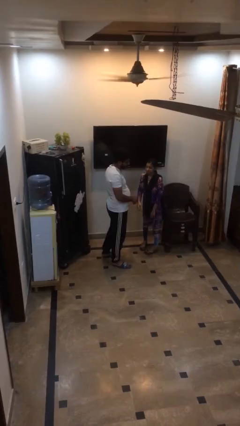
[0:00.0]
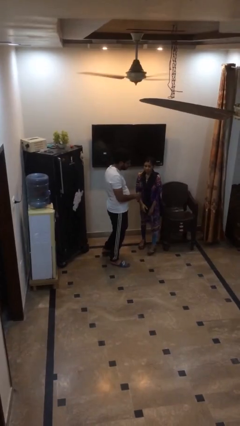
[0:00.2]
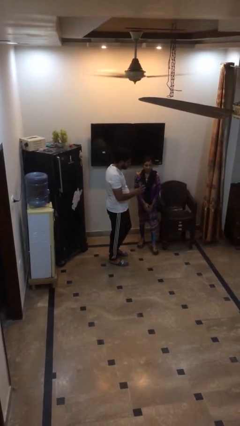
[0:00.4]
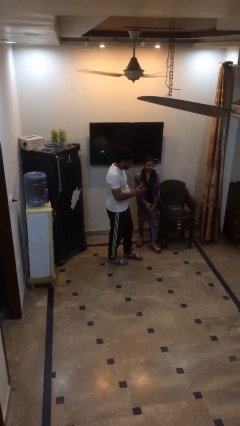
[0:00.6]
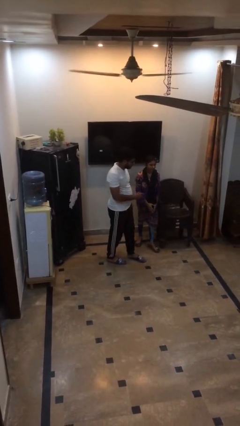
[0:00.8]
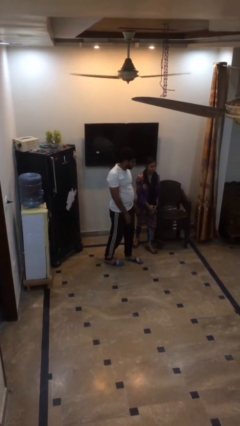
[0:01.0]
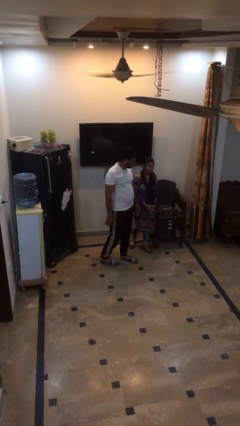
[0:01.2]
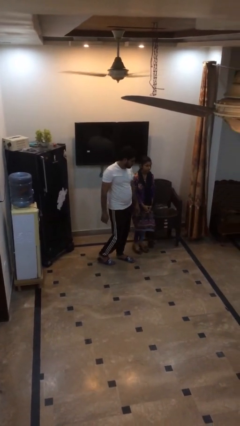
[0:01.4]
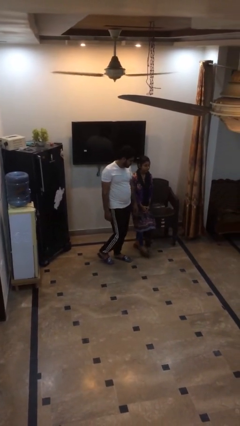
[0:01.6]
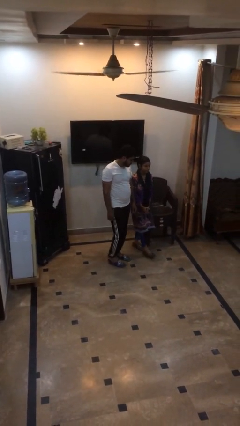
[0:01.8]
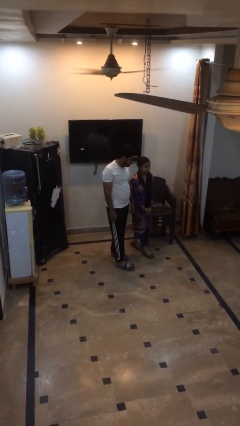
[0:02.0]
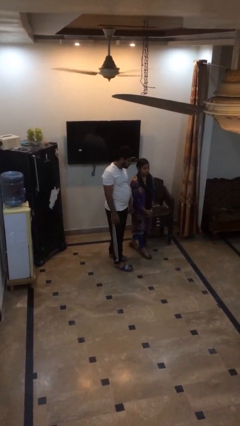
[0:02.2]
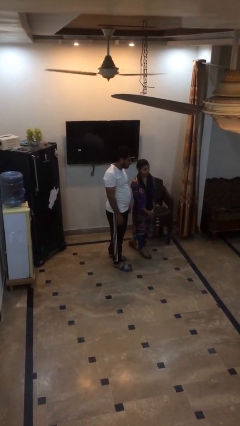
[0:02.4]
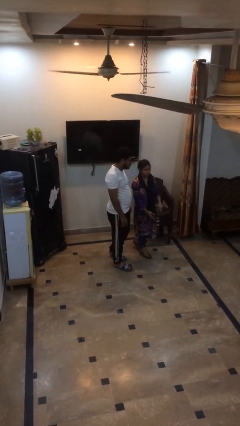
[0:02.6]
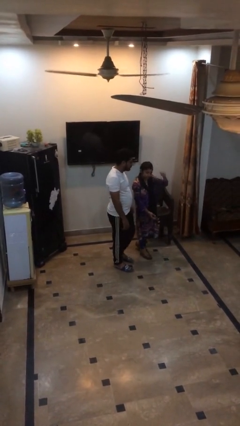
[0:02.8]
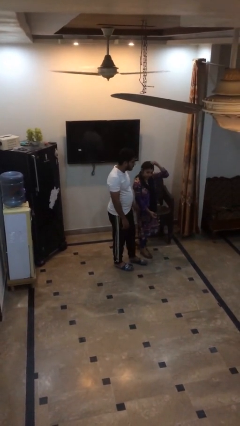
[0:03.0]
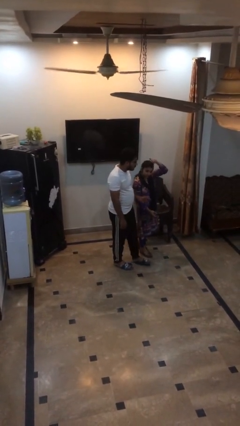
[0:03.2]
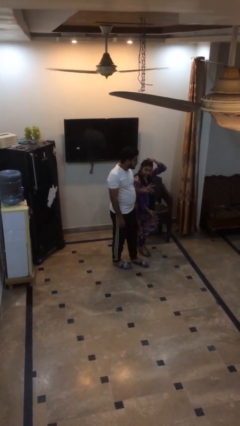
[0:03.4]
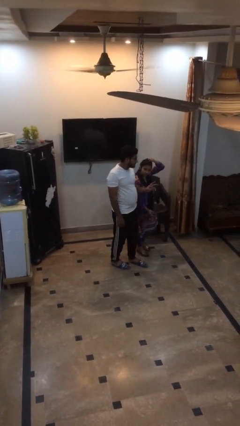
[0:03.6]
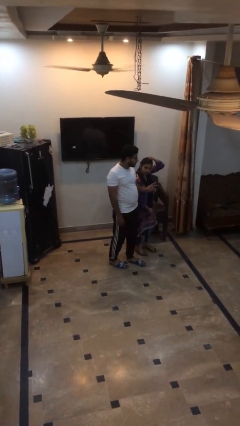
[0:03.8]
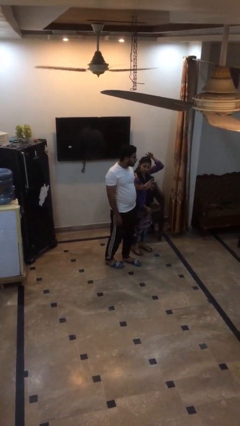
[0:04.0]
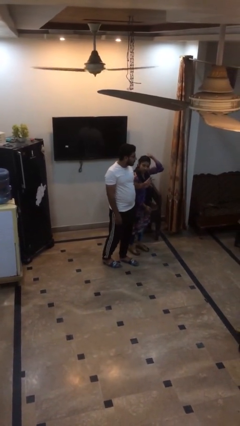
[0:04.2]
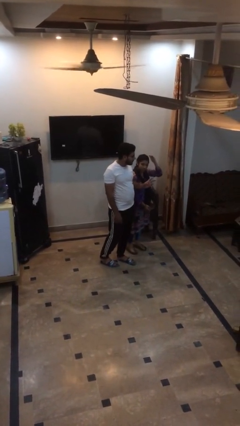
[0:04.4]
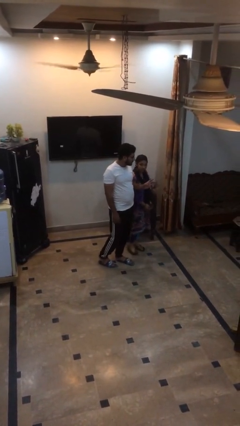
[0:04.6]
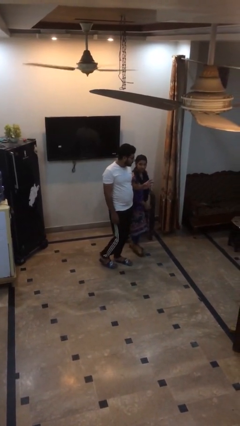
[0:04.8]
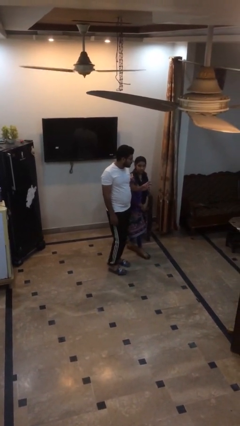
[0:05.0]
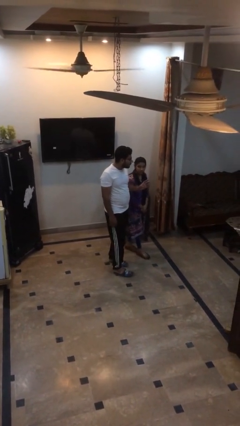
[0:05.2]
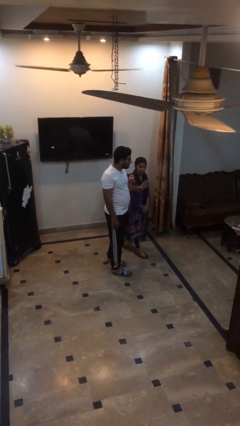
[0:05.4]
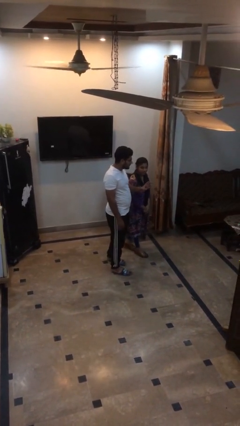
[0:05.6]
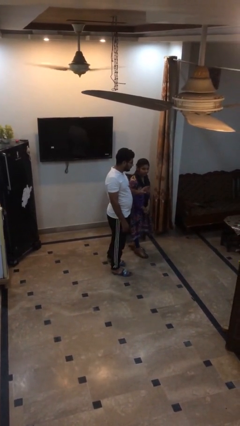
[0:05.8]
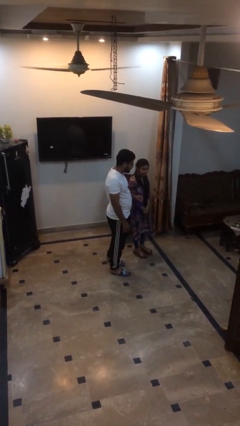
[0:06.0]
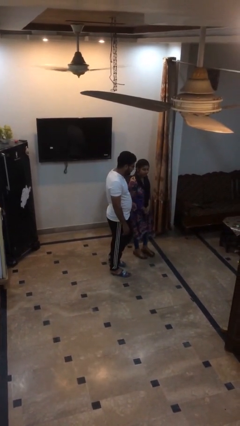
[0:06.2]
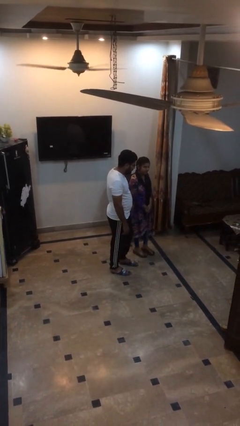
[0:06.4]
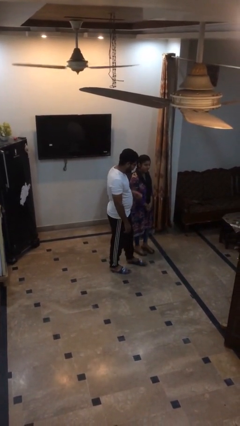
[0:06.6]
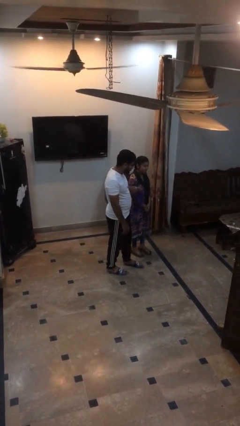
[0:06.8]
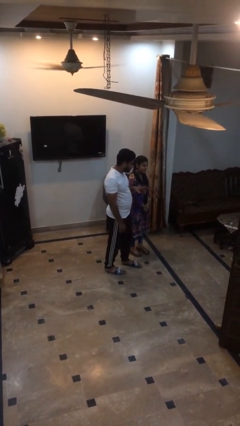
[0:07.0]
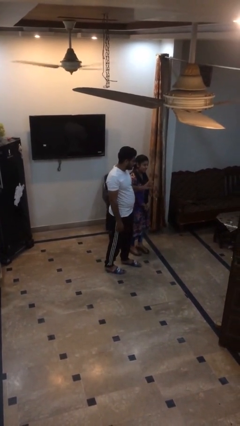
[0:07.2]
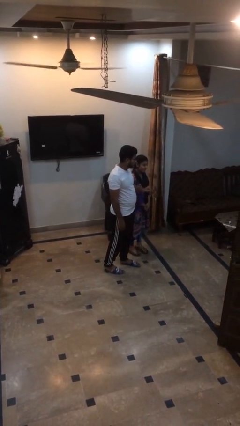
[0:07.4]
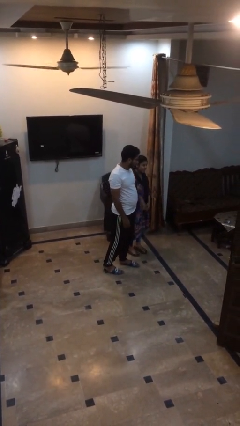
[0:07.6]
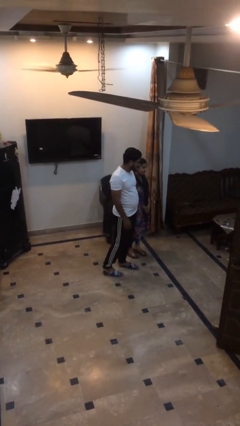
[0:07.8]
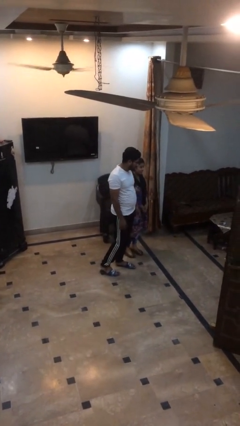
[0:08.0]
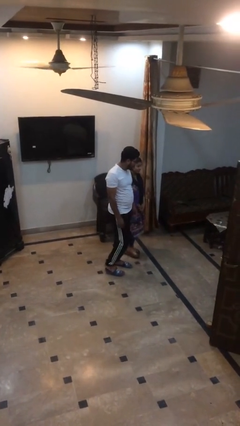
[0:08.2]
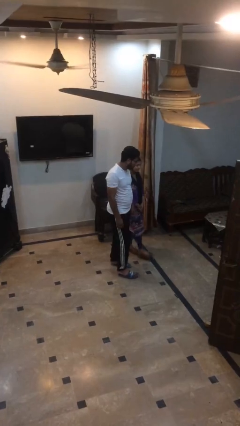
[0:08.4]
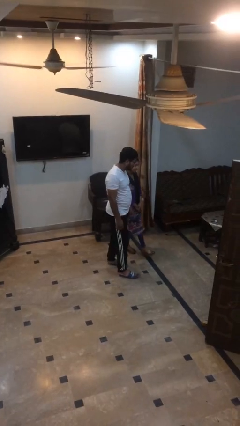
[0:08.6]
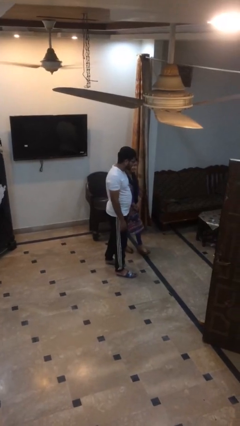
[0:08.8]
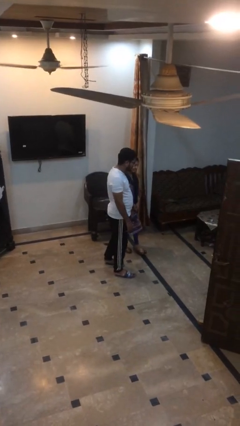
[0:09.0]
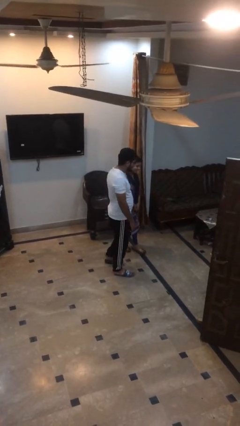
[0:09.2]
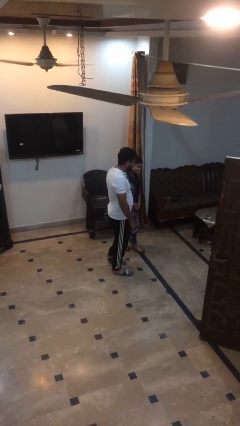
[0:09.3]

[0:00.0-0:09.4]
person talks to person

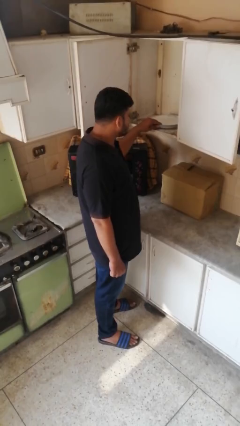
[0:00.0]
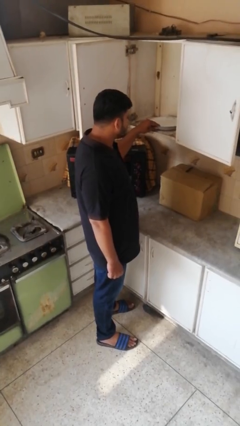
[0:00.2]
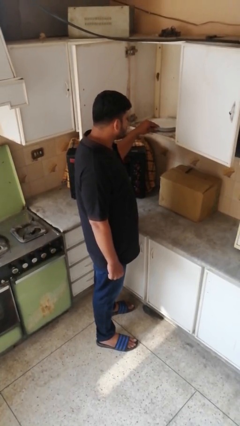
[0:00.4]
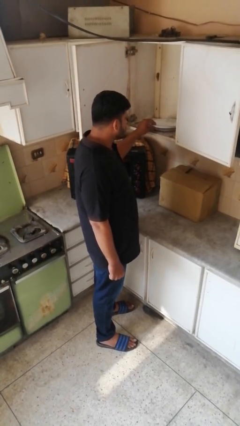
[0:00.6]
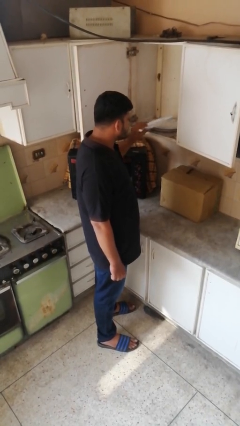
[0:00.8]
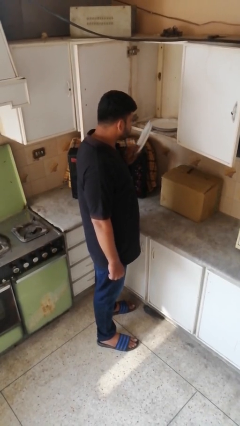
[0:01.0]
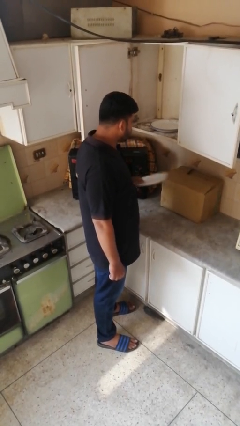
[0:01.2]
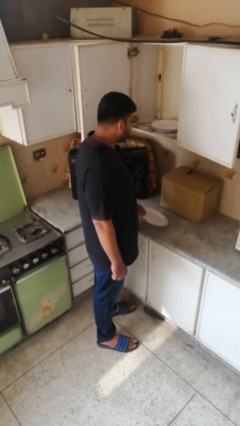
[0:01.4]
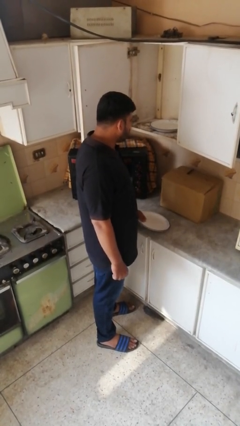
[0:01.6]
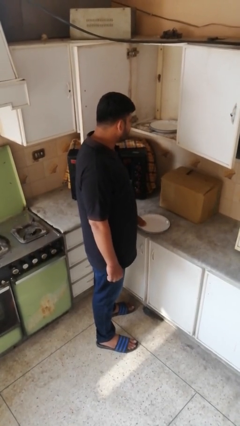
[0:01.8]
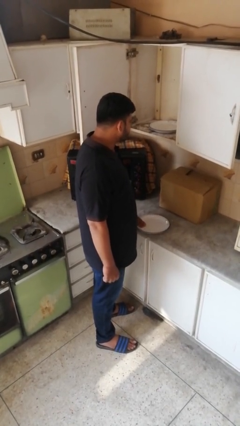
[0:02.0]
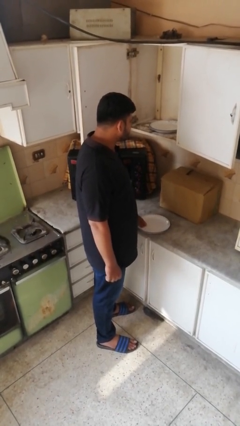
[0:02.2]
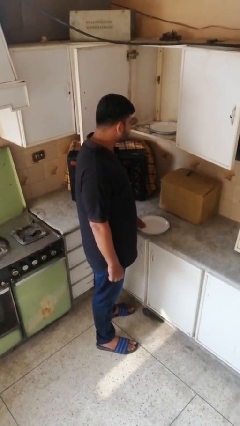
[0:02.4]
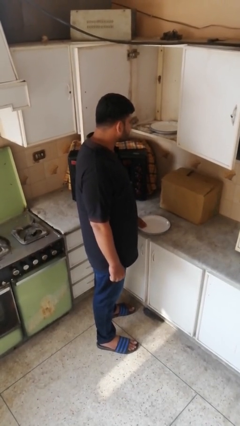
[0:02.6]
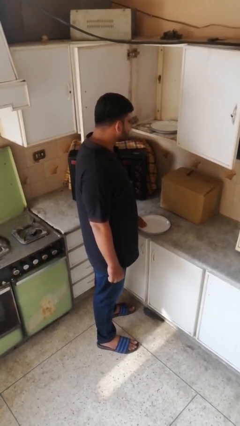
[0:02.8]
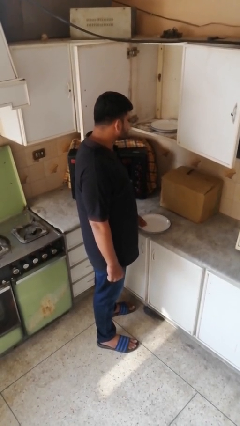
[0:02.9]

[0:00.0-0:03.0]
person takes object from cabinet

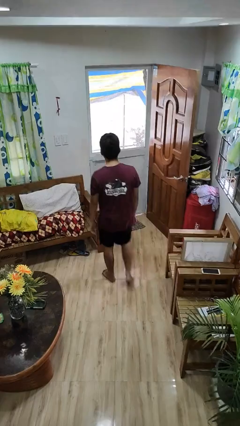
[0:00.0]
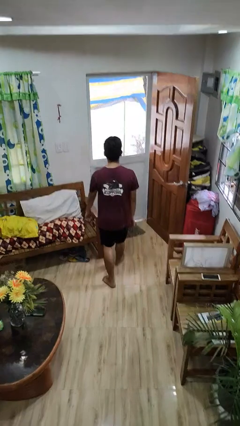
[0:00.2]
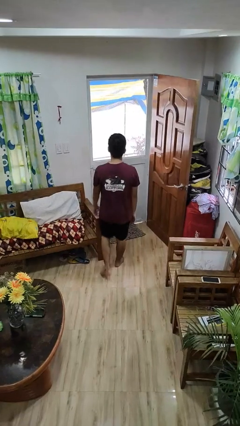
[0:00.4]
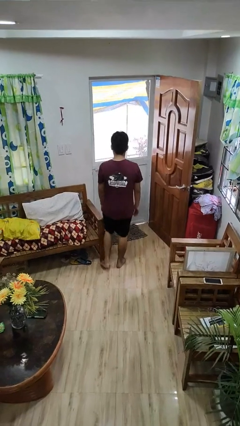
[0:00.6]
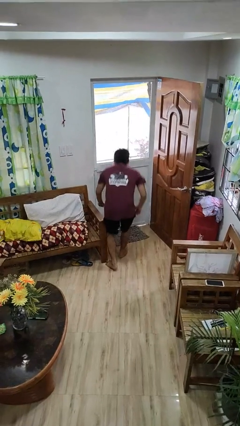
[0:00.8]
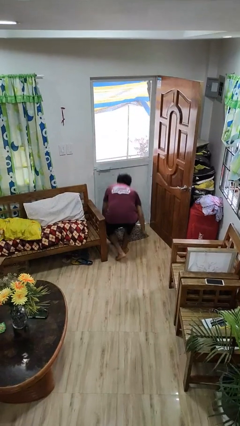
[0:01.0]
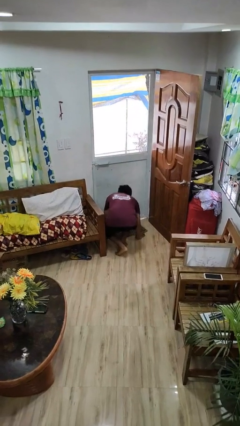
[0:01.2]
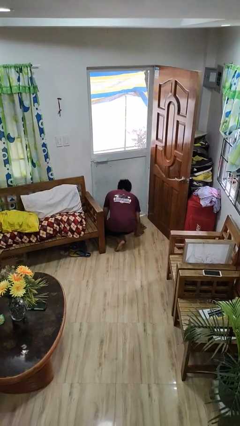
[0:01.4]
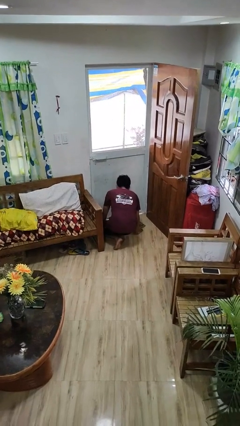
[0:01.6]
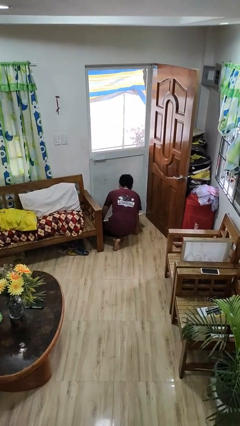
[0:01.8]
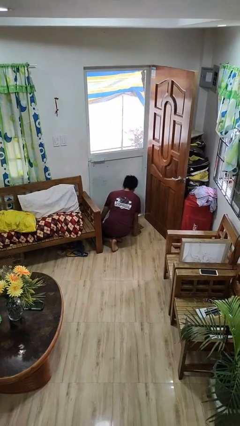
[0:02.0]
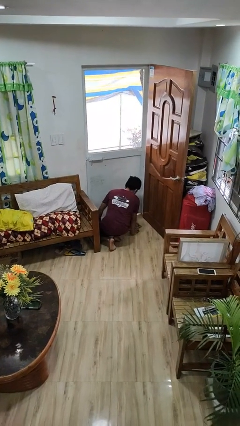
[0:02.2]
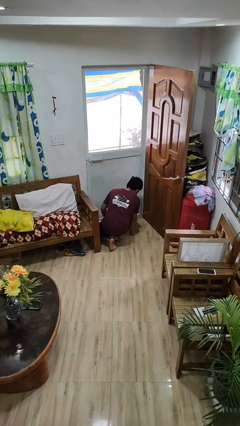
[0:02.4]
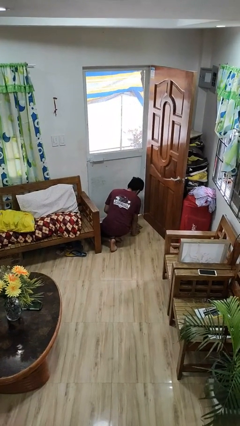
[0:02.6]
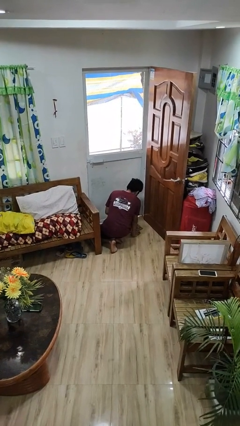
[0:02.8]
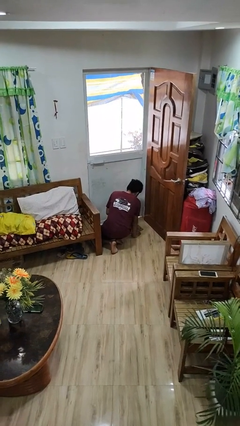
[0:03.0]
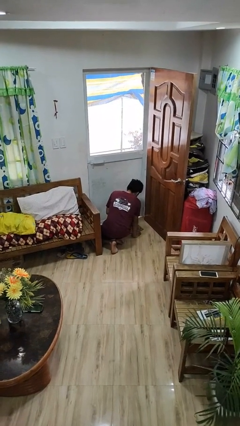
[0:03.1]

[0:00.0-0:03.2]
person trips on object on floor

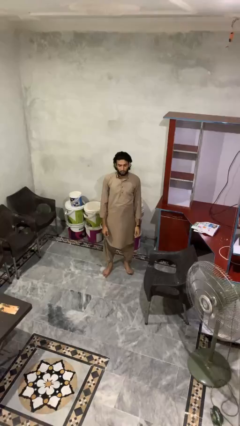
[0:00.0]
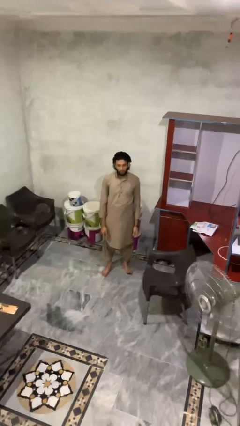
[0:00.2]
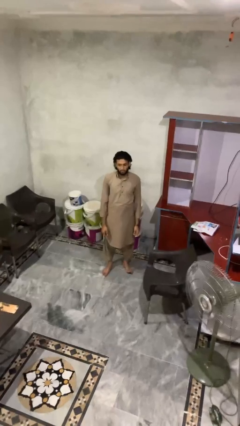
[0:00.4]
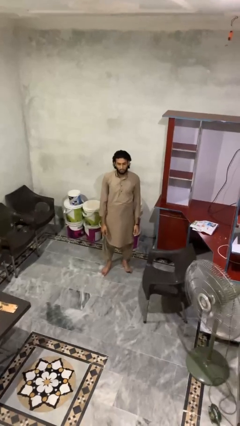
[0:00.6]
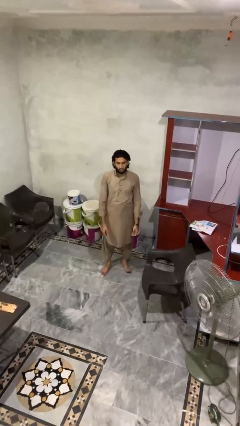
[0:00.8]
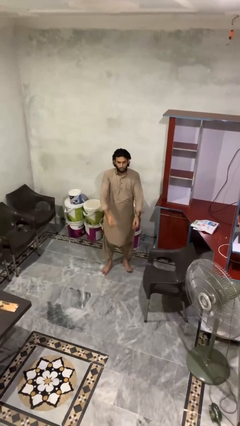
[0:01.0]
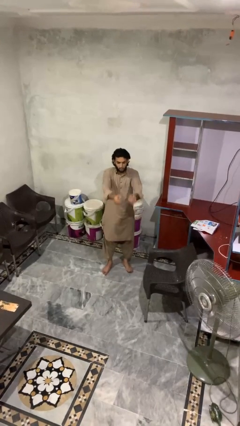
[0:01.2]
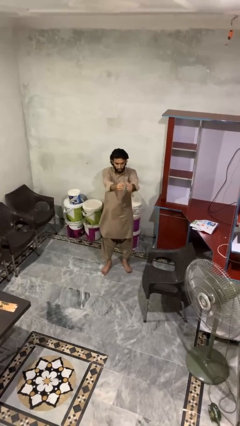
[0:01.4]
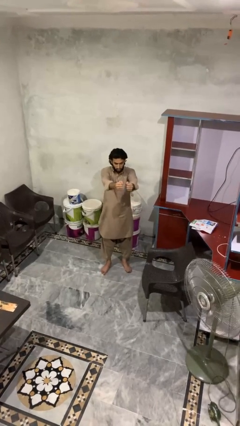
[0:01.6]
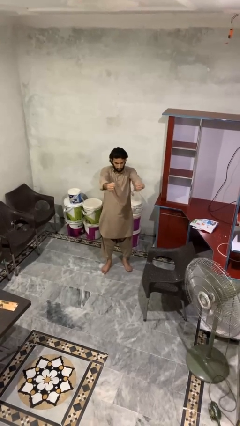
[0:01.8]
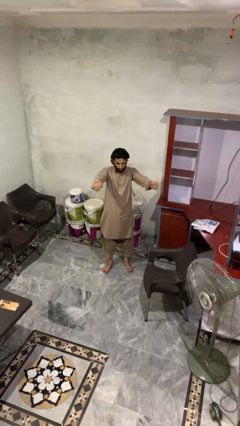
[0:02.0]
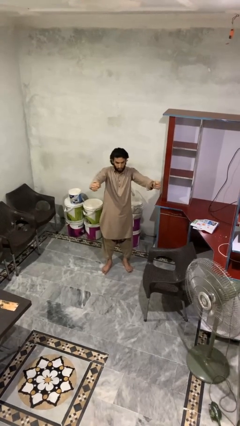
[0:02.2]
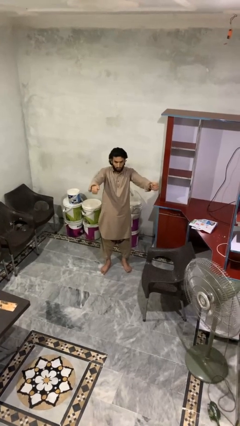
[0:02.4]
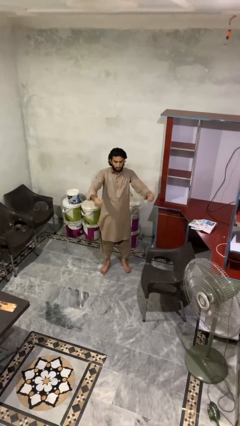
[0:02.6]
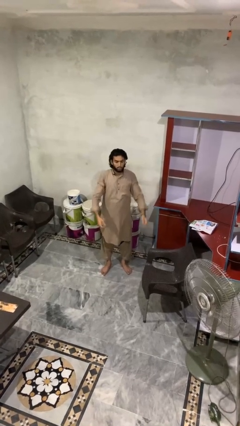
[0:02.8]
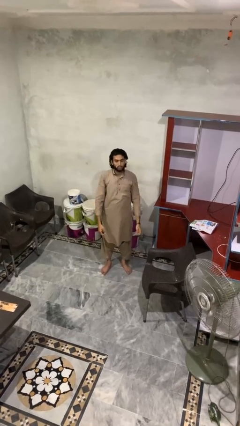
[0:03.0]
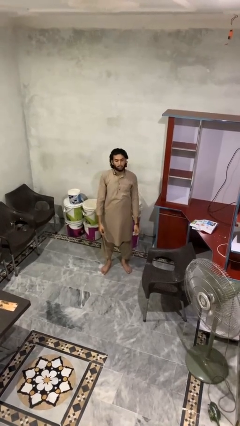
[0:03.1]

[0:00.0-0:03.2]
person gestures zoom in
